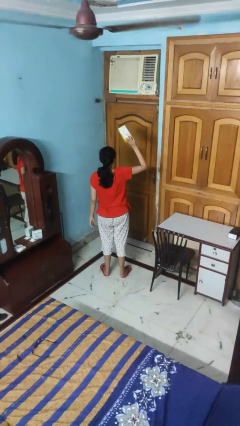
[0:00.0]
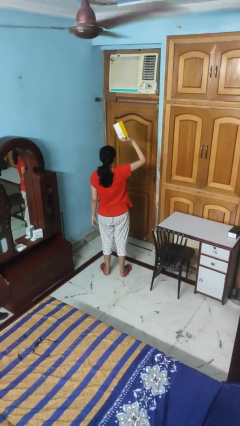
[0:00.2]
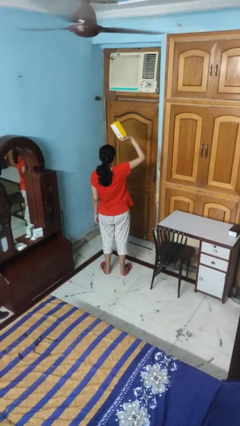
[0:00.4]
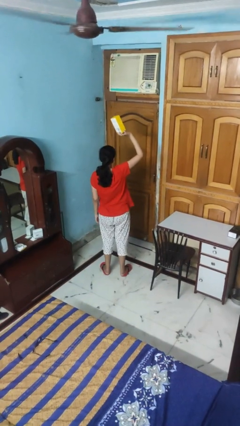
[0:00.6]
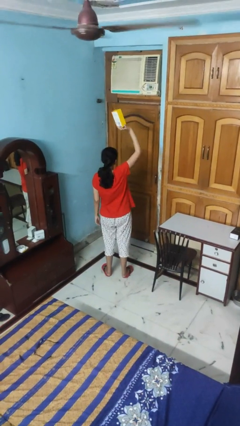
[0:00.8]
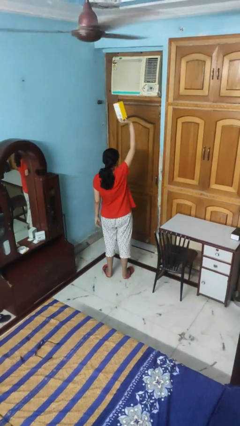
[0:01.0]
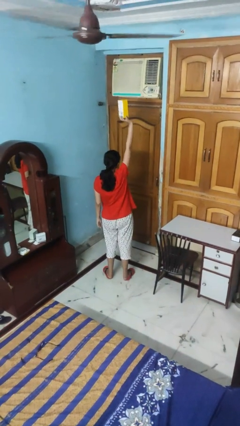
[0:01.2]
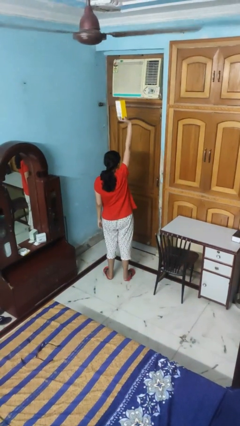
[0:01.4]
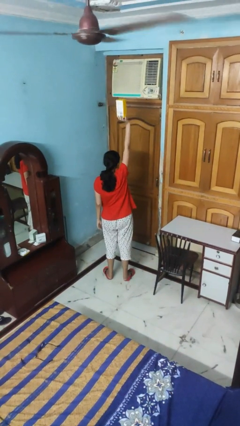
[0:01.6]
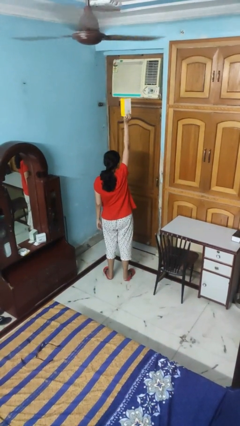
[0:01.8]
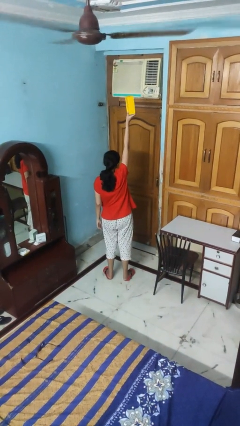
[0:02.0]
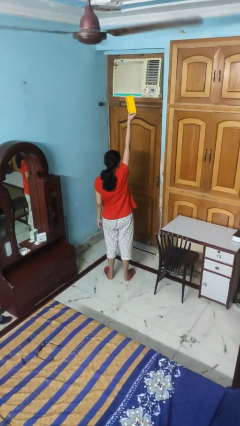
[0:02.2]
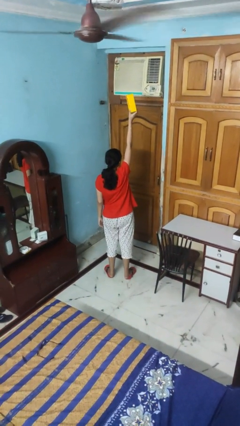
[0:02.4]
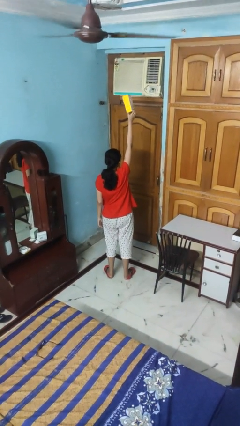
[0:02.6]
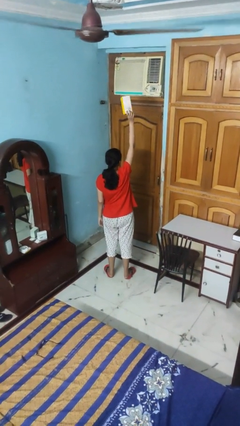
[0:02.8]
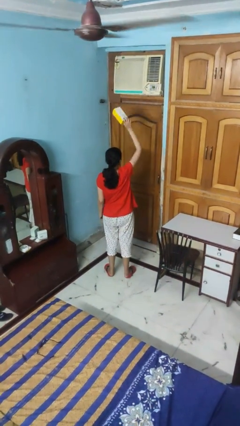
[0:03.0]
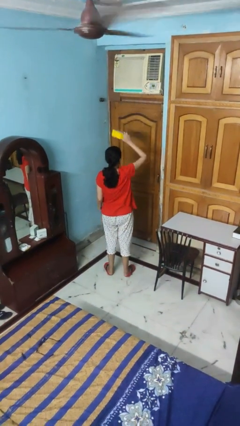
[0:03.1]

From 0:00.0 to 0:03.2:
person holds object above head

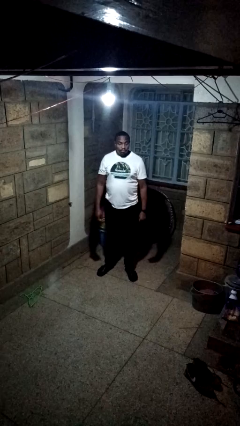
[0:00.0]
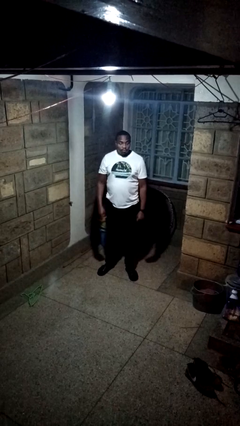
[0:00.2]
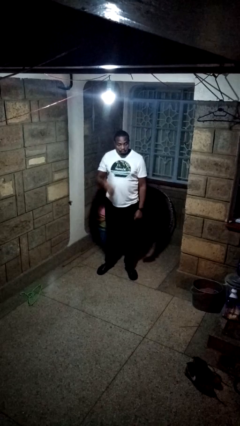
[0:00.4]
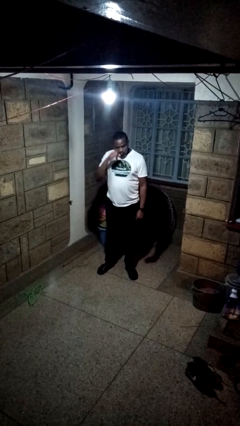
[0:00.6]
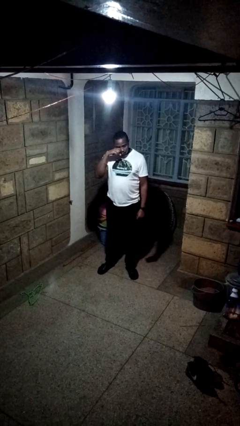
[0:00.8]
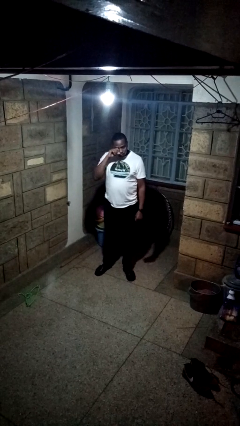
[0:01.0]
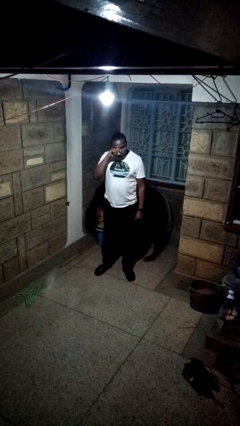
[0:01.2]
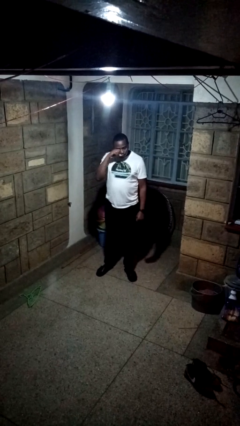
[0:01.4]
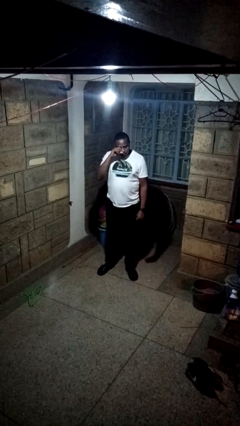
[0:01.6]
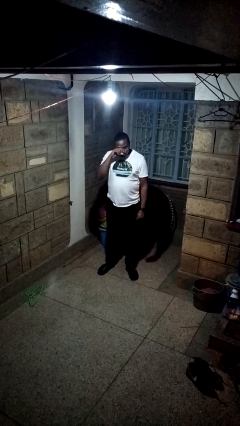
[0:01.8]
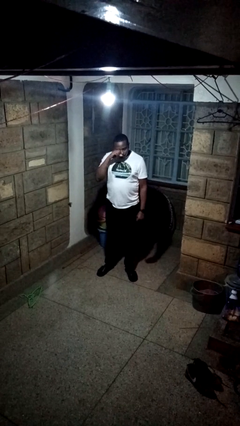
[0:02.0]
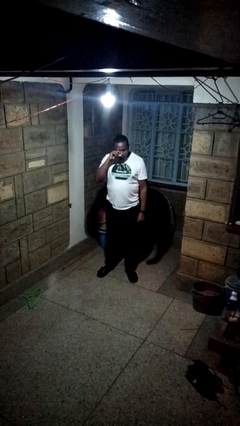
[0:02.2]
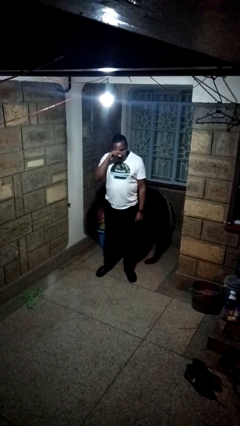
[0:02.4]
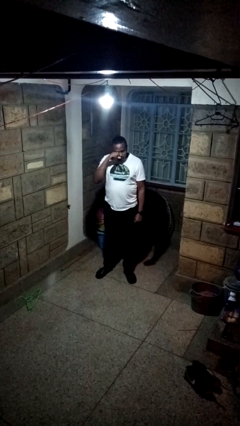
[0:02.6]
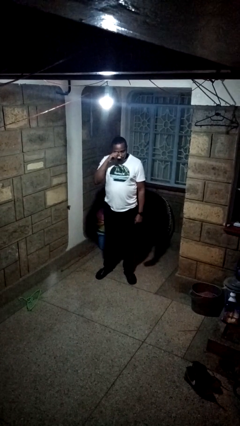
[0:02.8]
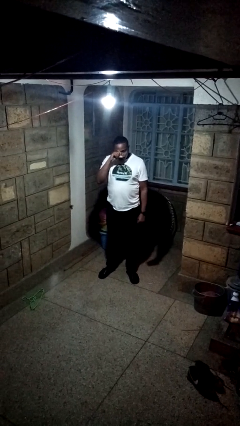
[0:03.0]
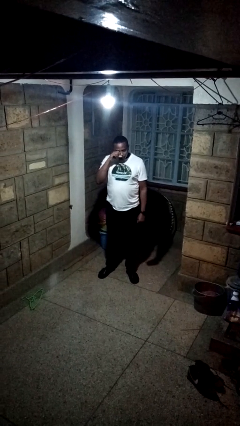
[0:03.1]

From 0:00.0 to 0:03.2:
person rubs eyes

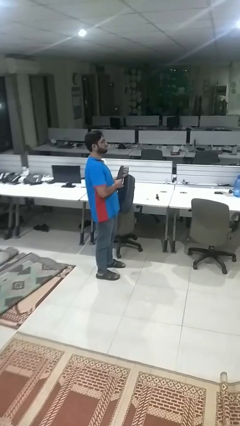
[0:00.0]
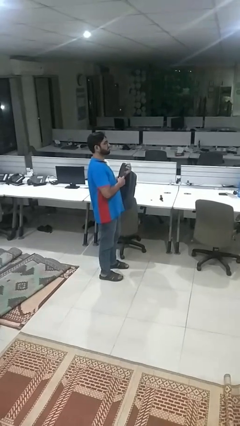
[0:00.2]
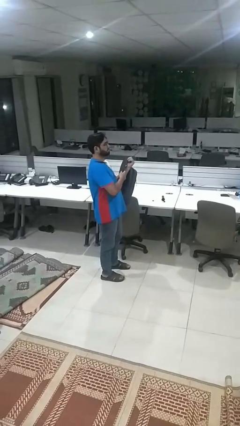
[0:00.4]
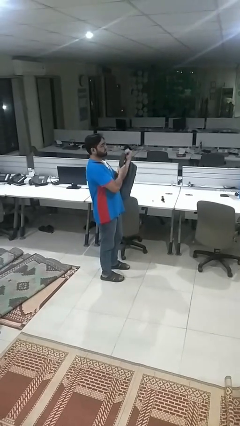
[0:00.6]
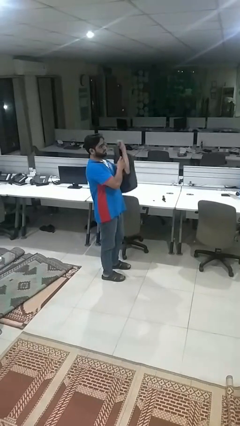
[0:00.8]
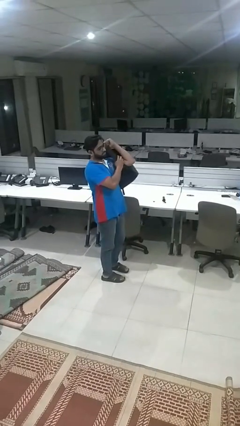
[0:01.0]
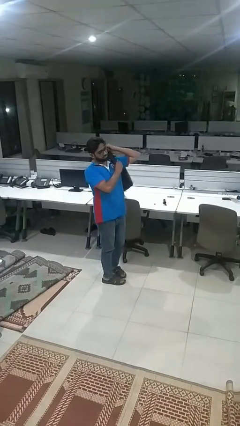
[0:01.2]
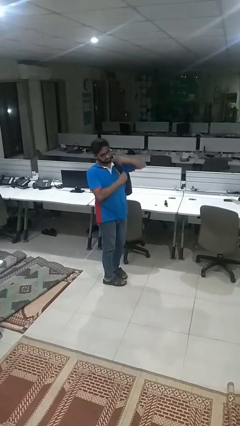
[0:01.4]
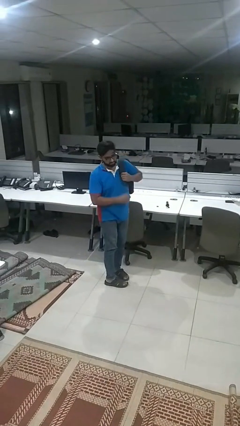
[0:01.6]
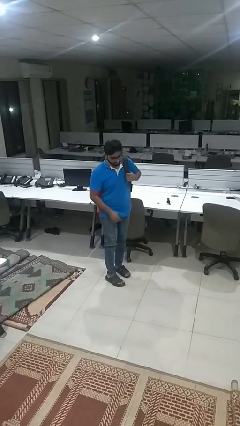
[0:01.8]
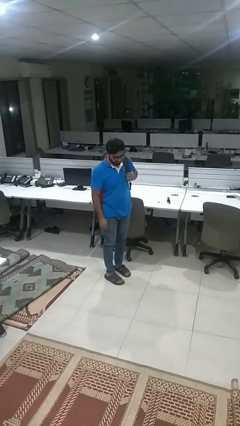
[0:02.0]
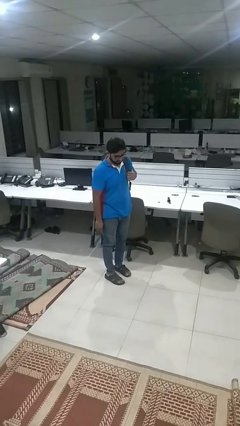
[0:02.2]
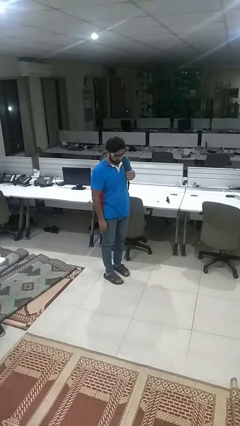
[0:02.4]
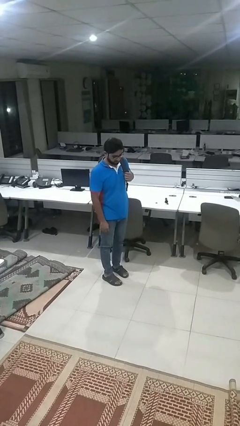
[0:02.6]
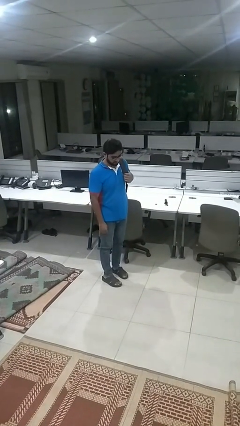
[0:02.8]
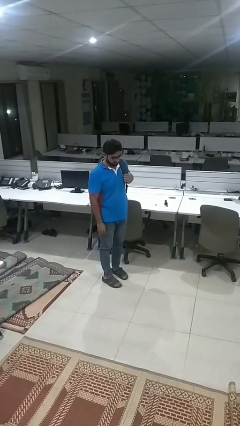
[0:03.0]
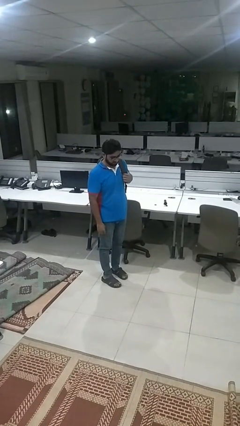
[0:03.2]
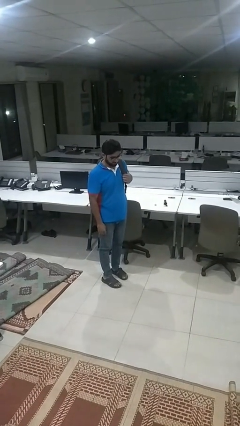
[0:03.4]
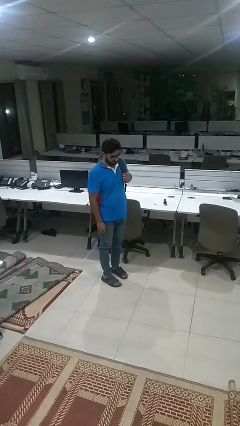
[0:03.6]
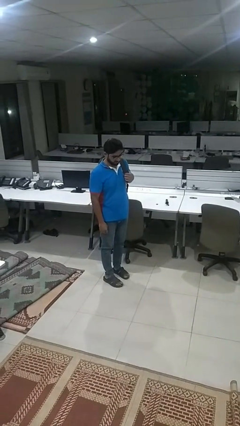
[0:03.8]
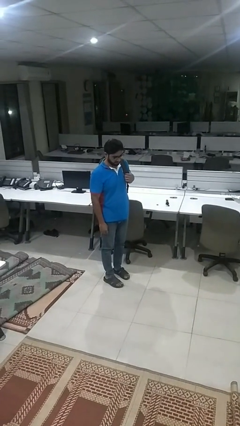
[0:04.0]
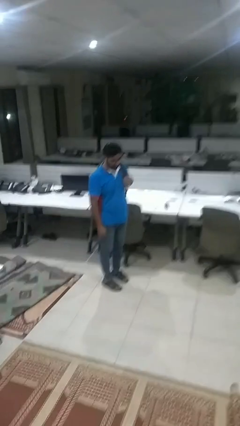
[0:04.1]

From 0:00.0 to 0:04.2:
person puts on backpack

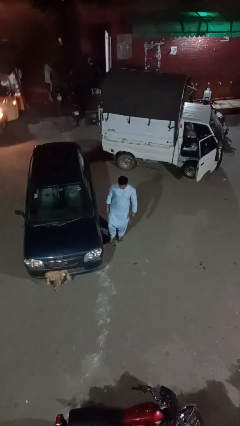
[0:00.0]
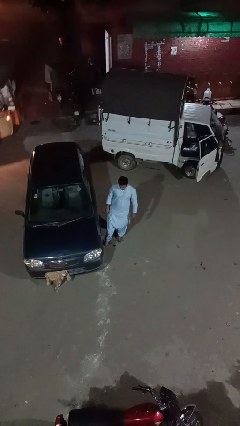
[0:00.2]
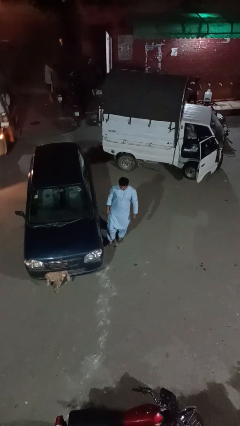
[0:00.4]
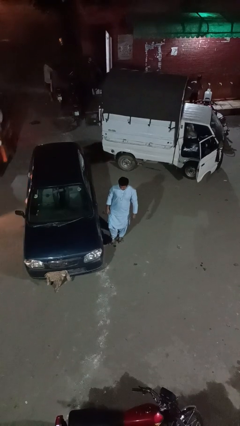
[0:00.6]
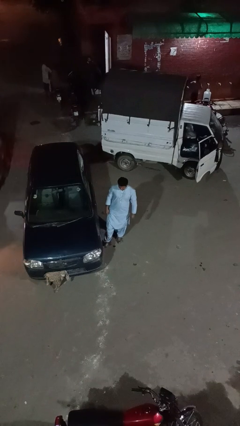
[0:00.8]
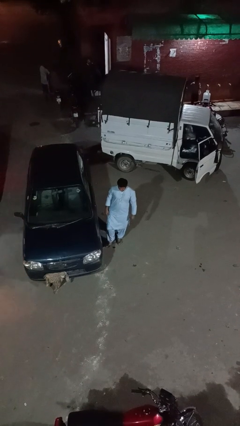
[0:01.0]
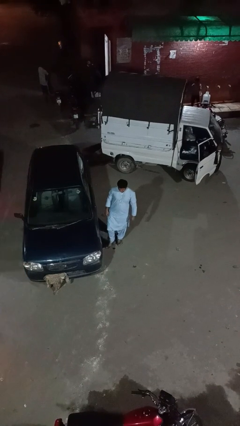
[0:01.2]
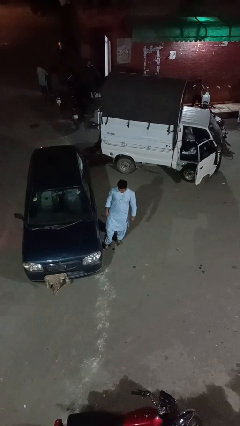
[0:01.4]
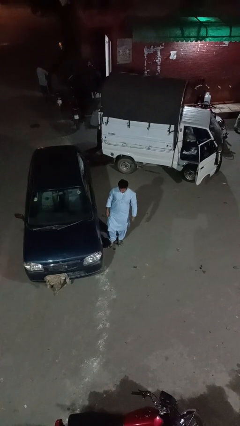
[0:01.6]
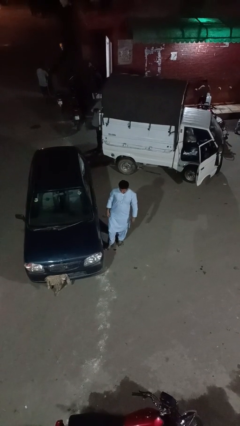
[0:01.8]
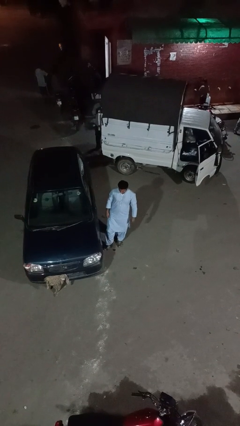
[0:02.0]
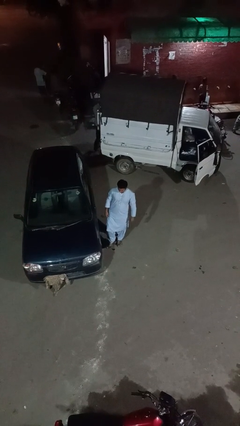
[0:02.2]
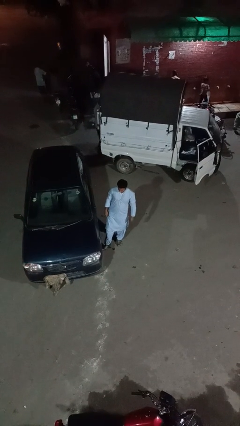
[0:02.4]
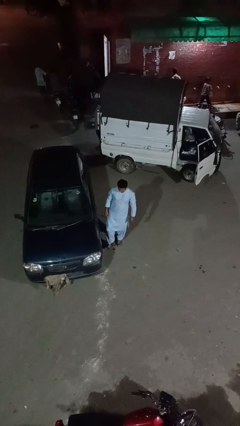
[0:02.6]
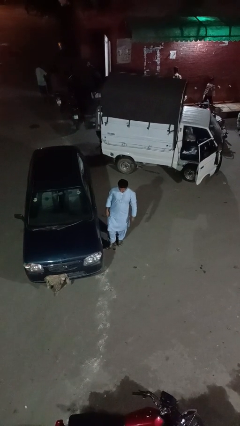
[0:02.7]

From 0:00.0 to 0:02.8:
person kicks car tires

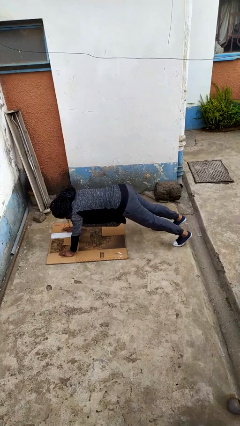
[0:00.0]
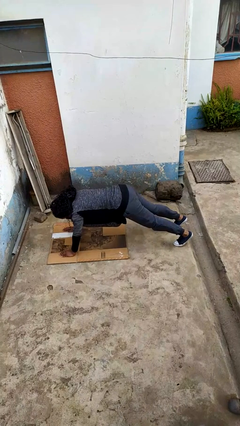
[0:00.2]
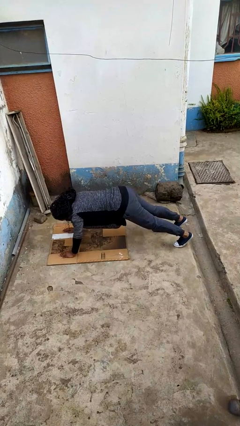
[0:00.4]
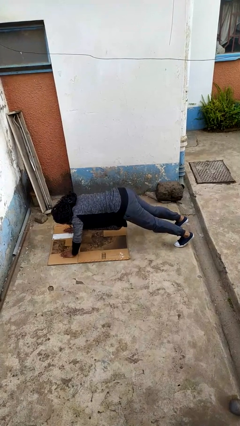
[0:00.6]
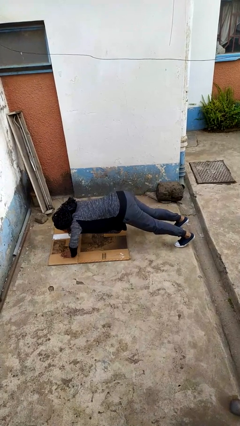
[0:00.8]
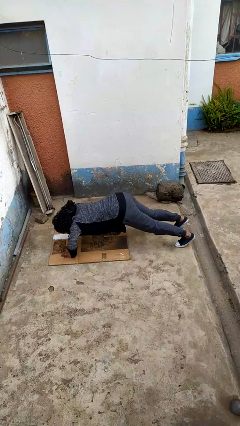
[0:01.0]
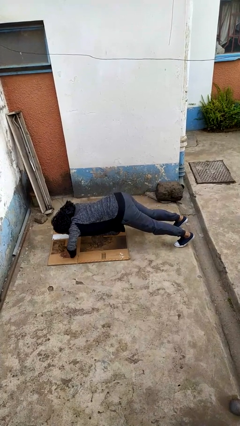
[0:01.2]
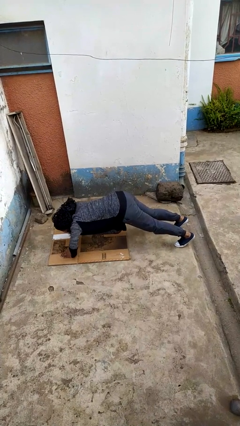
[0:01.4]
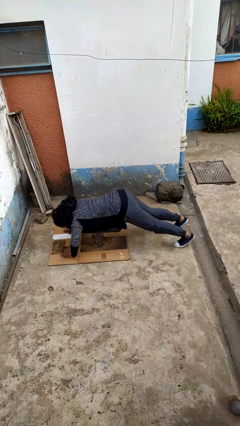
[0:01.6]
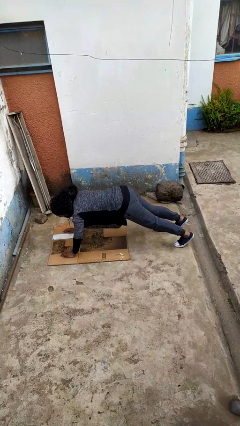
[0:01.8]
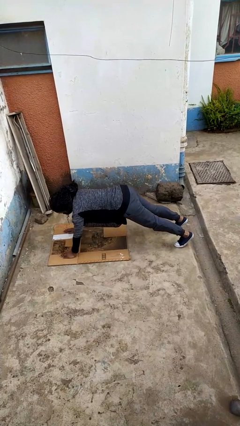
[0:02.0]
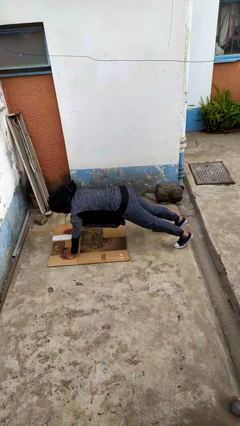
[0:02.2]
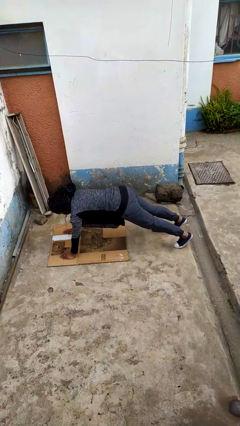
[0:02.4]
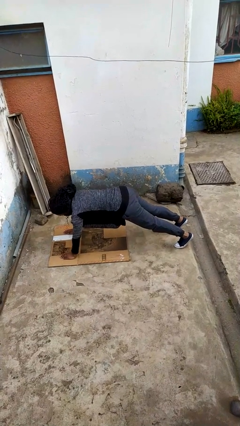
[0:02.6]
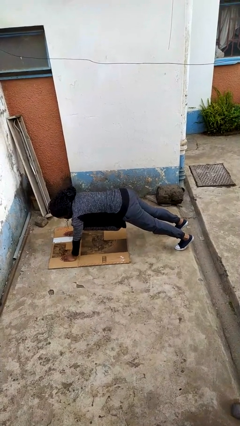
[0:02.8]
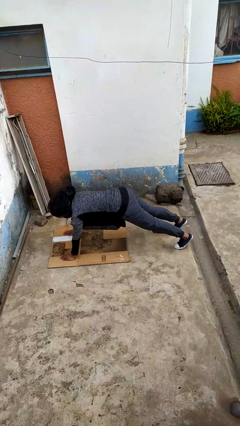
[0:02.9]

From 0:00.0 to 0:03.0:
person exercises with pushup

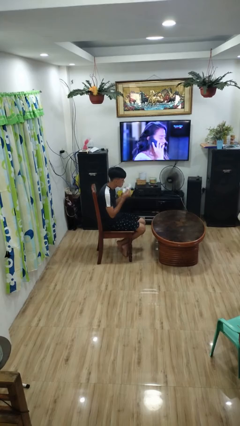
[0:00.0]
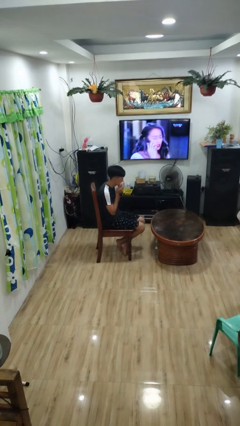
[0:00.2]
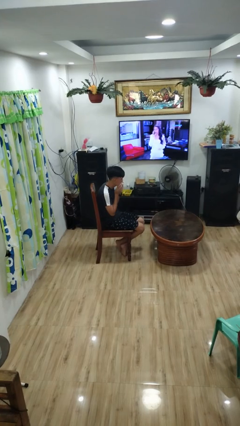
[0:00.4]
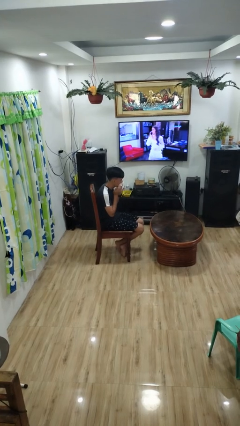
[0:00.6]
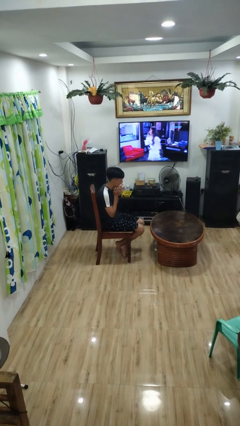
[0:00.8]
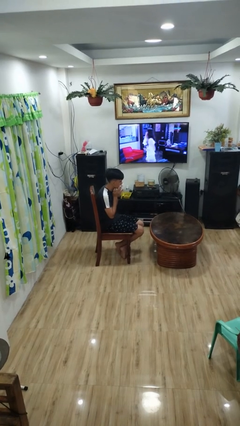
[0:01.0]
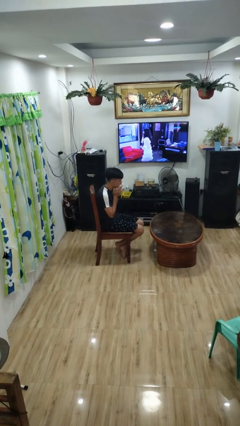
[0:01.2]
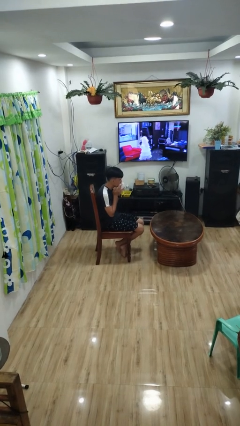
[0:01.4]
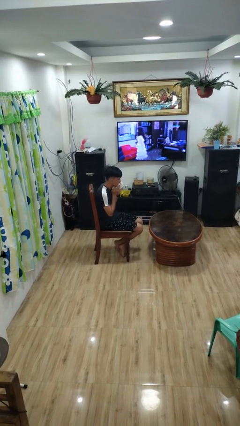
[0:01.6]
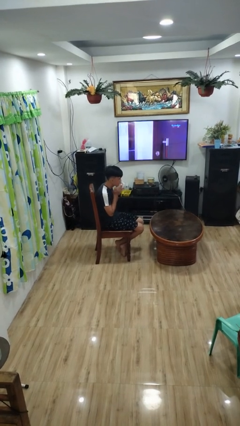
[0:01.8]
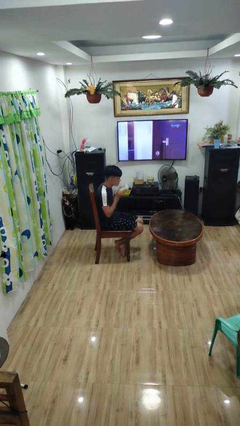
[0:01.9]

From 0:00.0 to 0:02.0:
person wipes mouth with napkin
